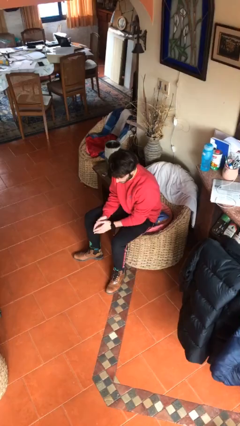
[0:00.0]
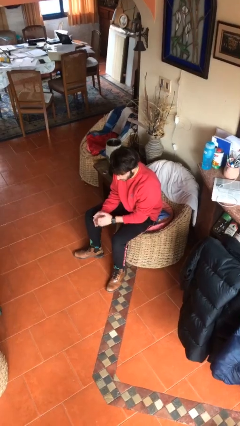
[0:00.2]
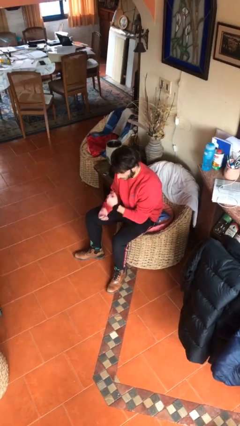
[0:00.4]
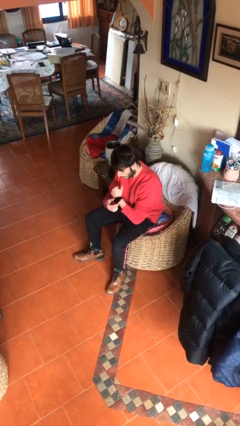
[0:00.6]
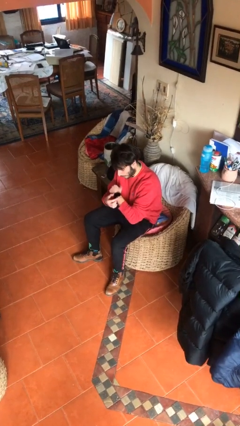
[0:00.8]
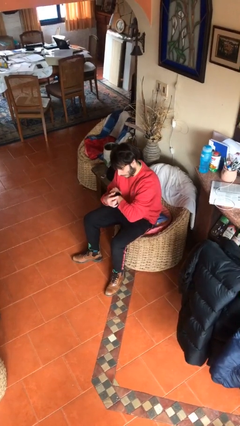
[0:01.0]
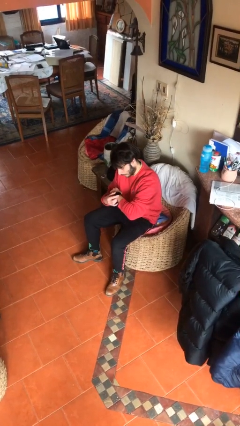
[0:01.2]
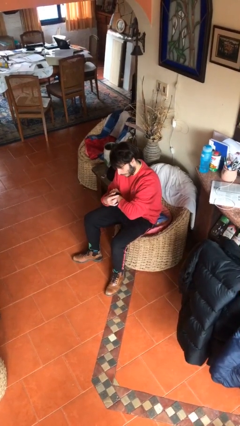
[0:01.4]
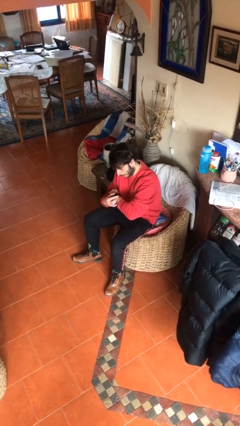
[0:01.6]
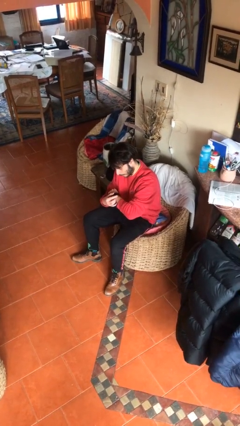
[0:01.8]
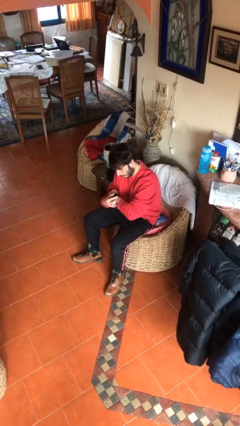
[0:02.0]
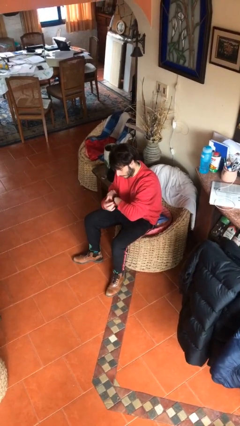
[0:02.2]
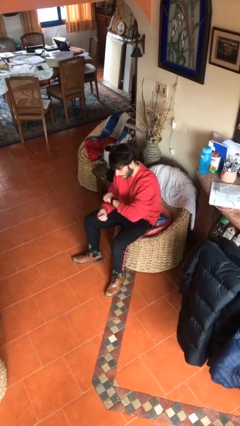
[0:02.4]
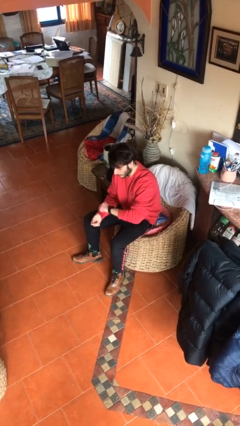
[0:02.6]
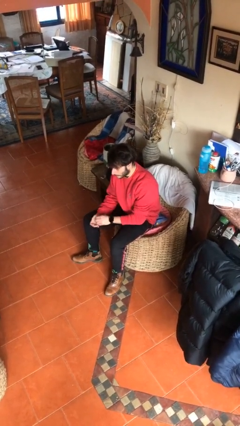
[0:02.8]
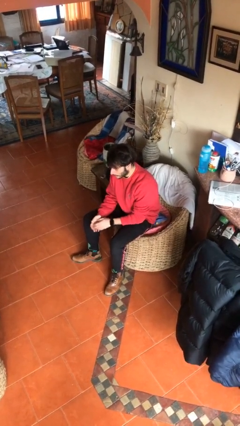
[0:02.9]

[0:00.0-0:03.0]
person looks at wristwatch

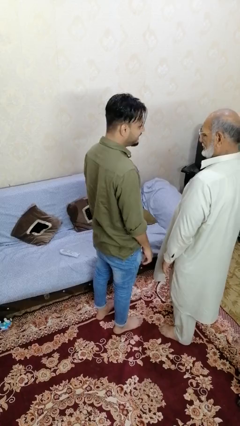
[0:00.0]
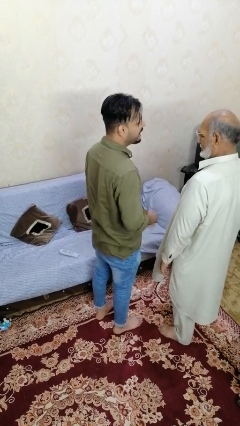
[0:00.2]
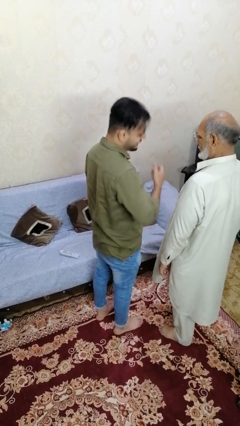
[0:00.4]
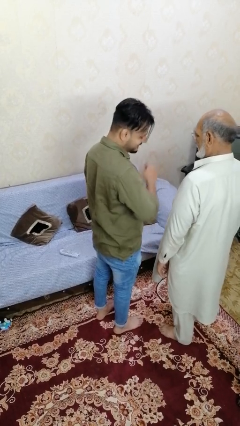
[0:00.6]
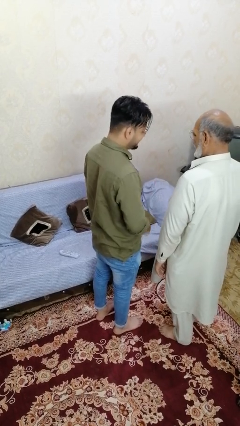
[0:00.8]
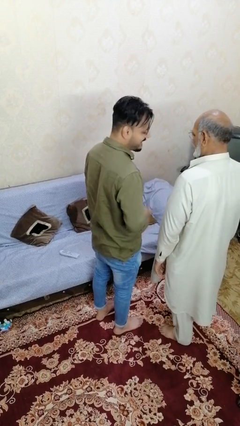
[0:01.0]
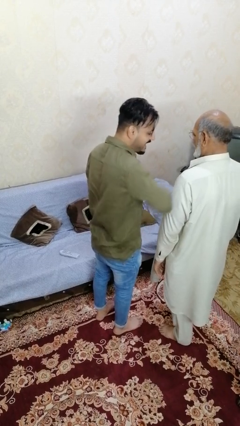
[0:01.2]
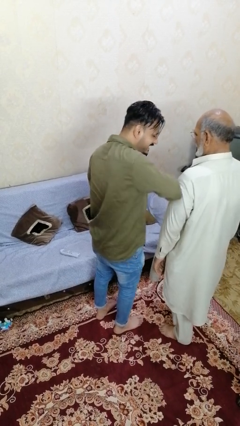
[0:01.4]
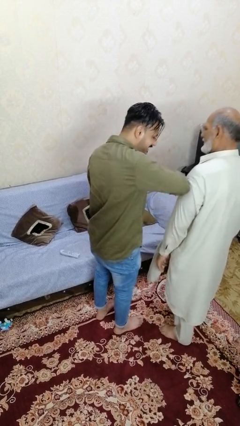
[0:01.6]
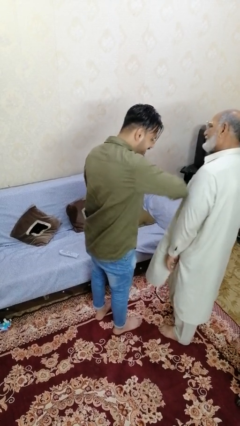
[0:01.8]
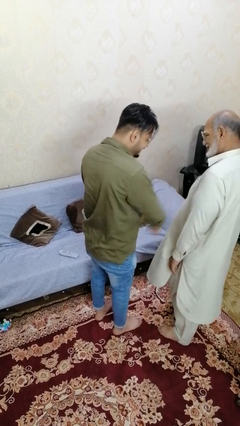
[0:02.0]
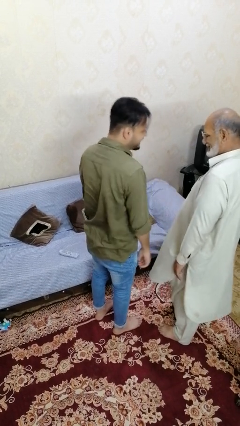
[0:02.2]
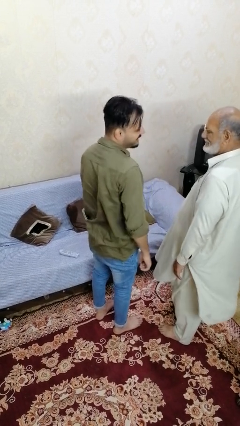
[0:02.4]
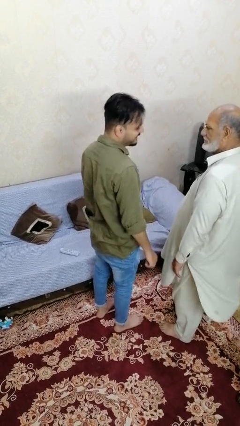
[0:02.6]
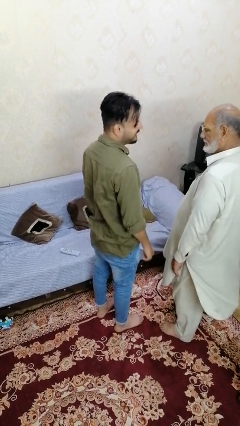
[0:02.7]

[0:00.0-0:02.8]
person nudges person with elbow

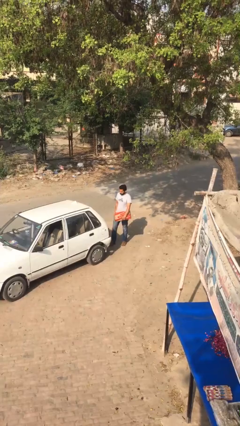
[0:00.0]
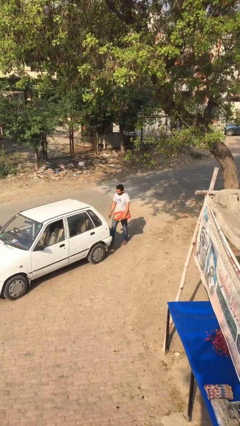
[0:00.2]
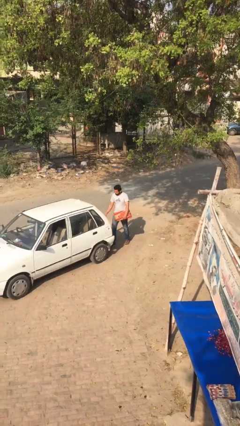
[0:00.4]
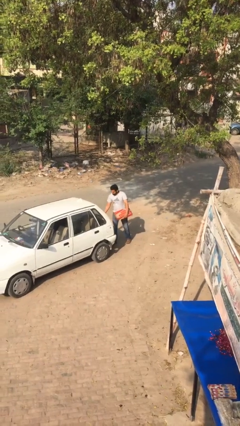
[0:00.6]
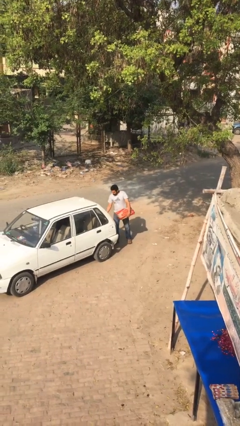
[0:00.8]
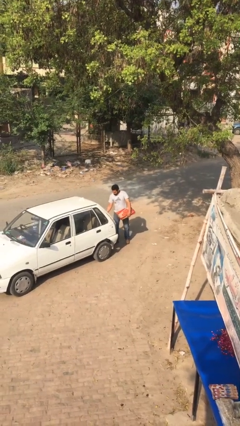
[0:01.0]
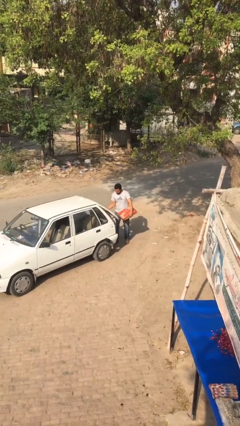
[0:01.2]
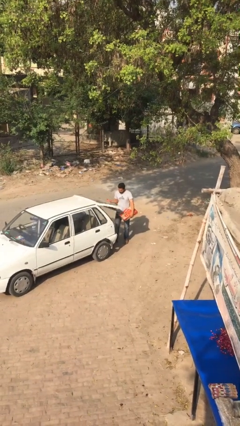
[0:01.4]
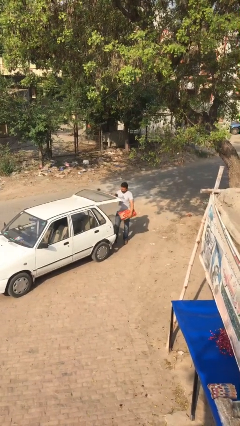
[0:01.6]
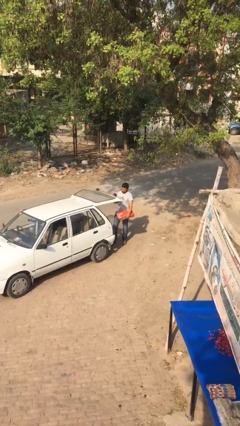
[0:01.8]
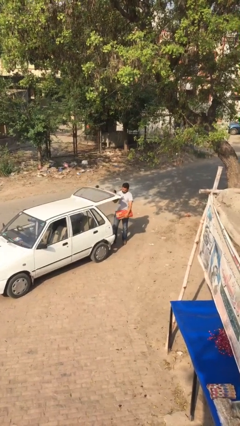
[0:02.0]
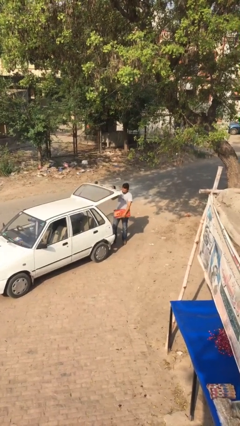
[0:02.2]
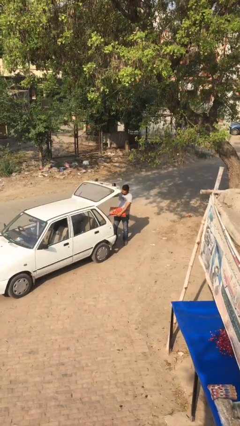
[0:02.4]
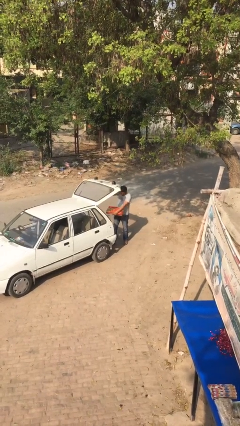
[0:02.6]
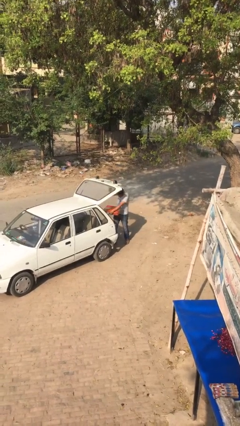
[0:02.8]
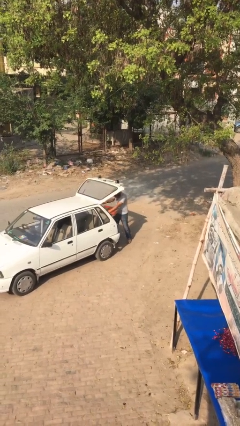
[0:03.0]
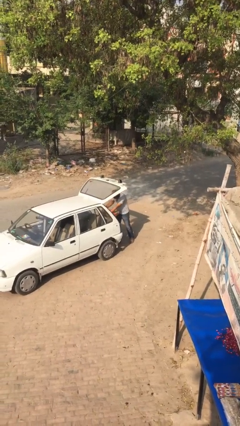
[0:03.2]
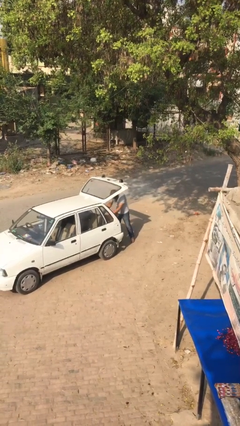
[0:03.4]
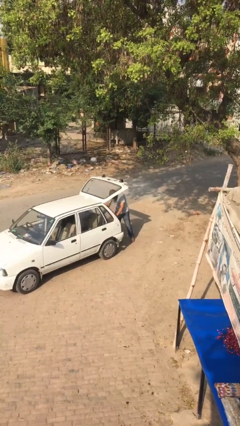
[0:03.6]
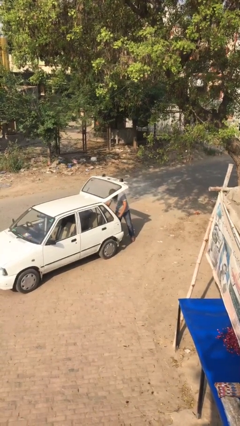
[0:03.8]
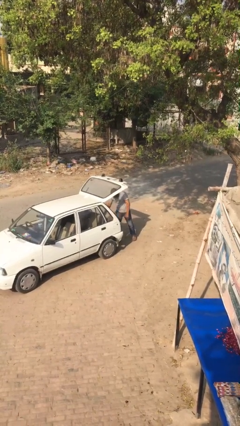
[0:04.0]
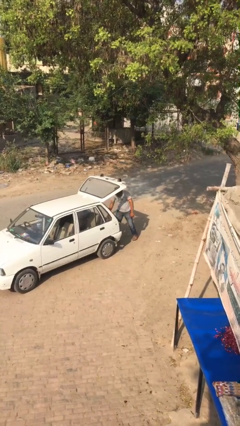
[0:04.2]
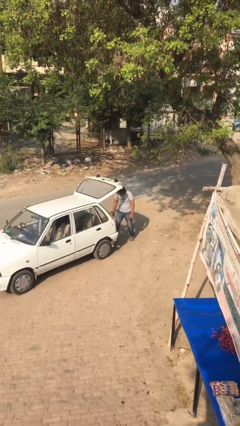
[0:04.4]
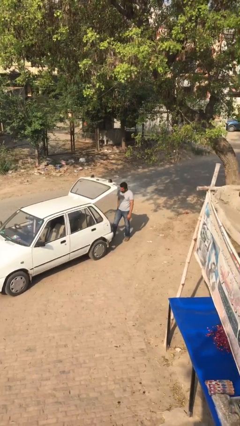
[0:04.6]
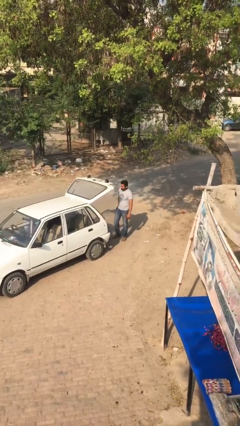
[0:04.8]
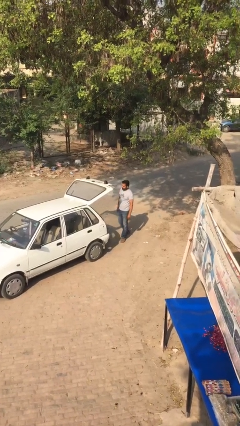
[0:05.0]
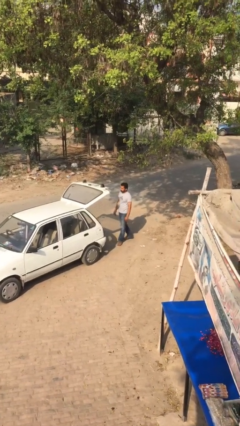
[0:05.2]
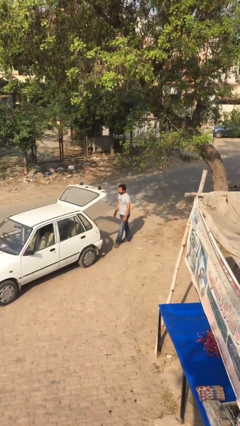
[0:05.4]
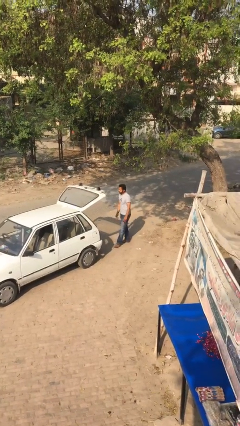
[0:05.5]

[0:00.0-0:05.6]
person loads car

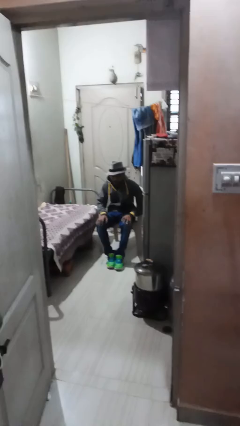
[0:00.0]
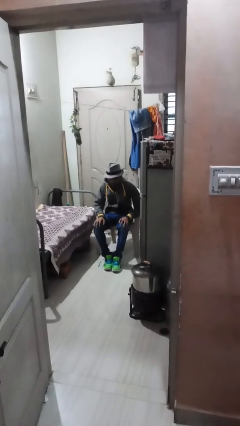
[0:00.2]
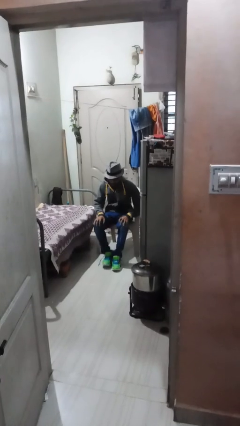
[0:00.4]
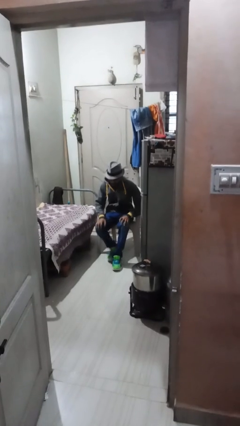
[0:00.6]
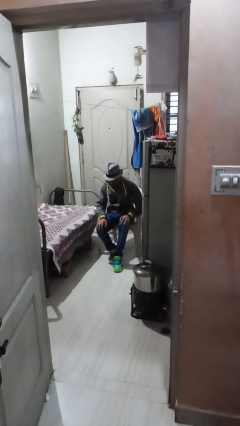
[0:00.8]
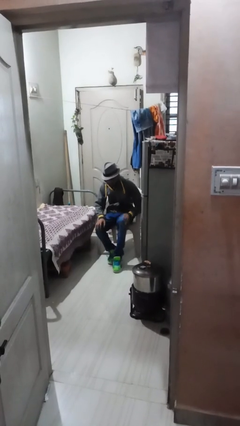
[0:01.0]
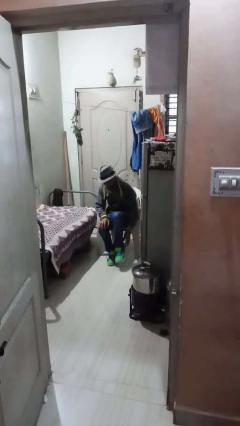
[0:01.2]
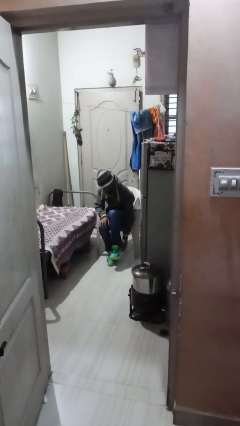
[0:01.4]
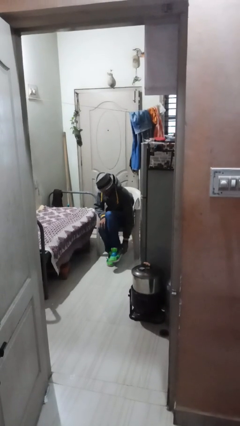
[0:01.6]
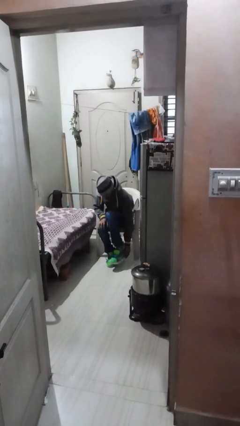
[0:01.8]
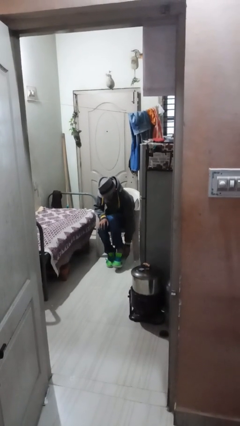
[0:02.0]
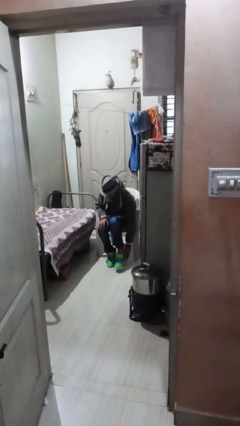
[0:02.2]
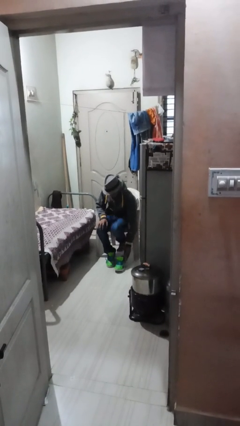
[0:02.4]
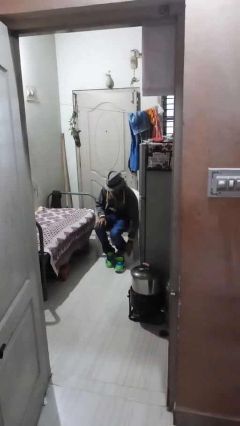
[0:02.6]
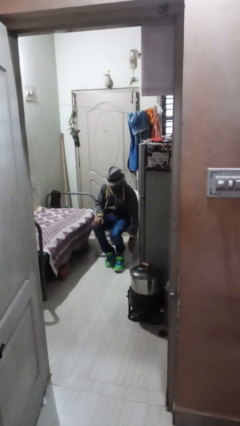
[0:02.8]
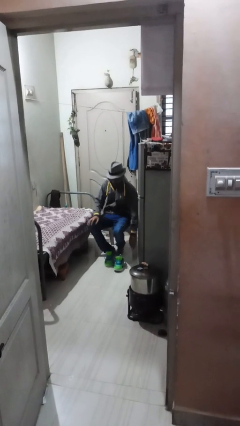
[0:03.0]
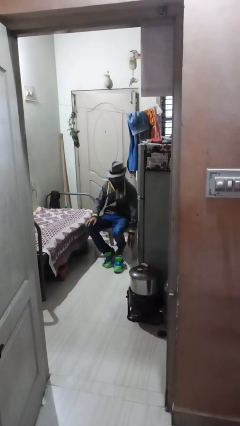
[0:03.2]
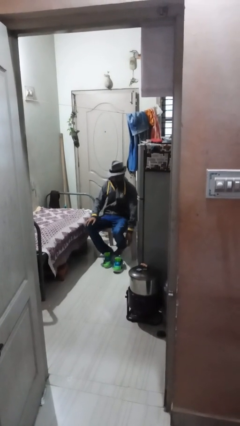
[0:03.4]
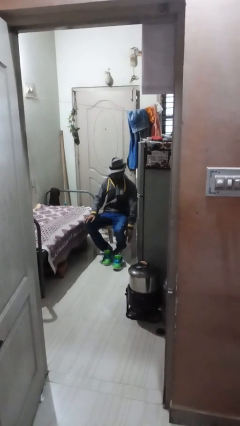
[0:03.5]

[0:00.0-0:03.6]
person takes off shoes

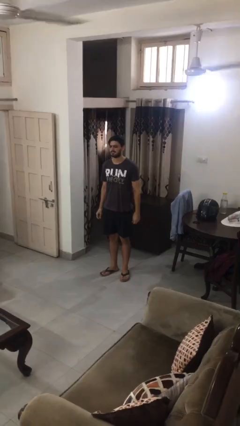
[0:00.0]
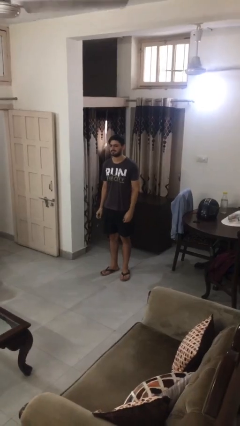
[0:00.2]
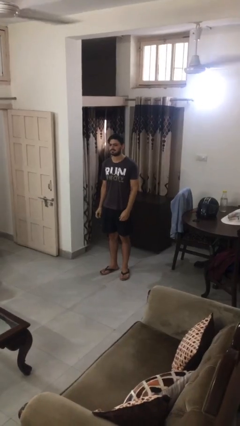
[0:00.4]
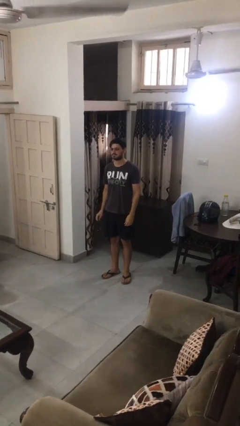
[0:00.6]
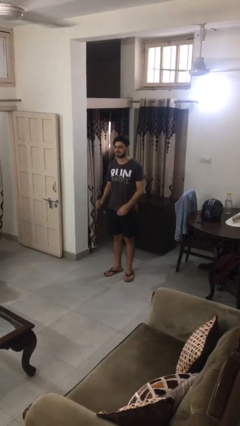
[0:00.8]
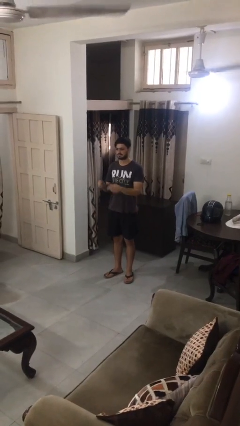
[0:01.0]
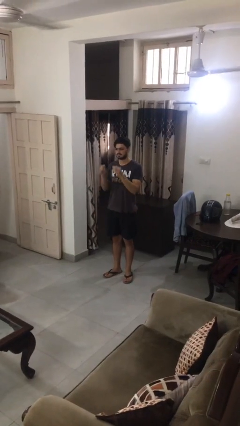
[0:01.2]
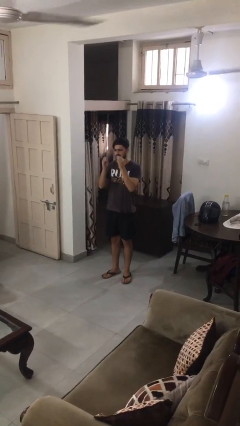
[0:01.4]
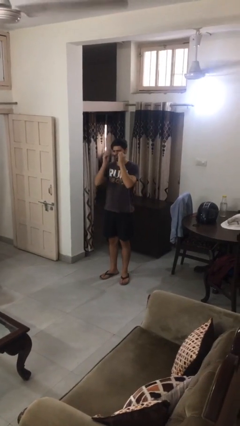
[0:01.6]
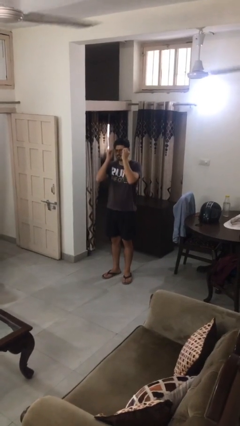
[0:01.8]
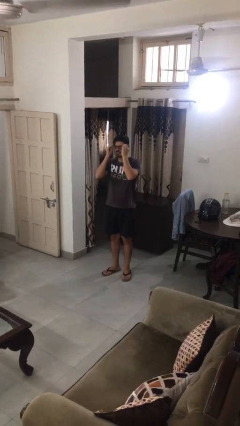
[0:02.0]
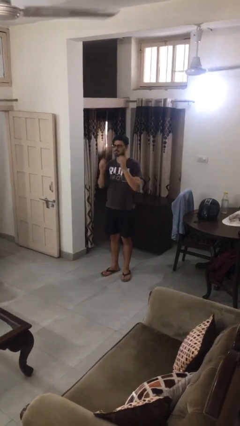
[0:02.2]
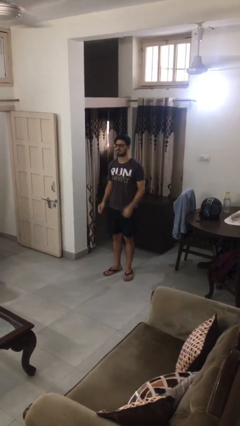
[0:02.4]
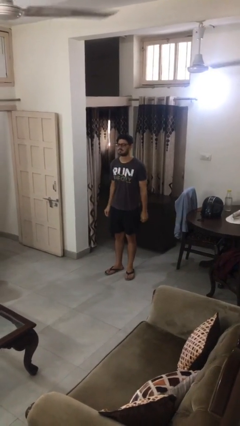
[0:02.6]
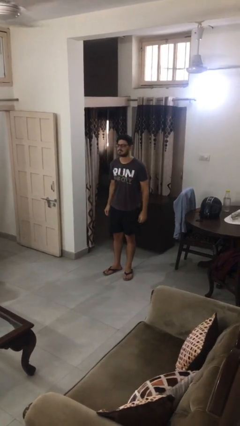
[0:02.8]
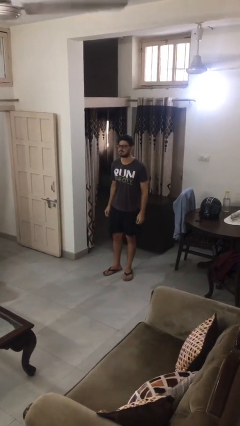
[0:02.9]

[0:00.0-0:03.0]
person puts on glasses
